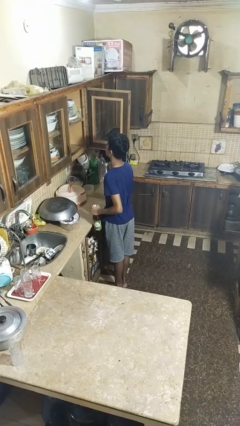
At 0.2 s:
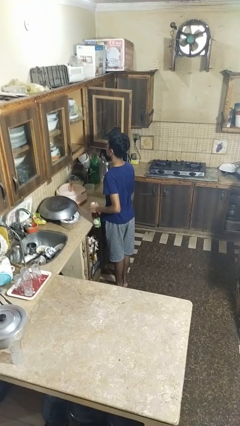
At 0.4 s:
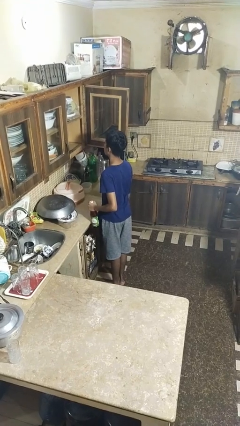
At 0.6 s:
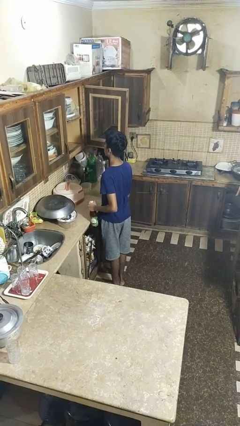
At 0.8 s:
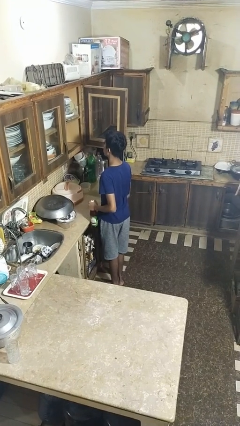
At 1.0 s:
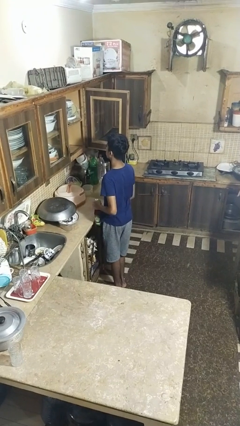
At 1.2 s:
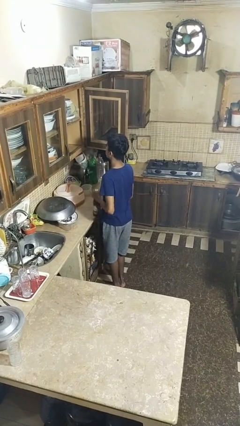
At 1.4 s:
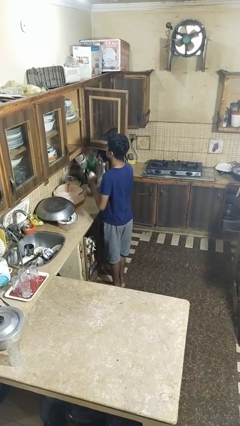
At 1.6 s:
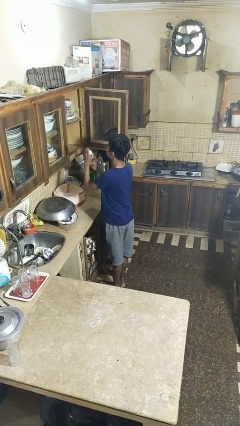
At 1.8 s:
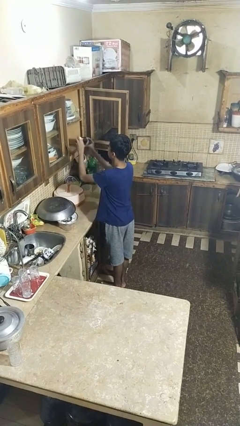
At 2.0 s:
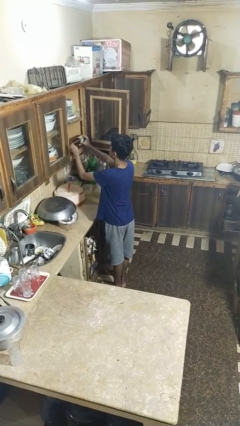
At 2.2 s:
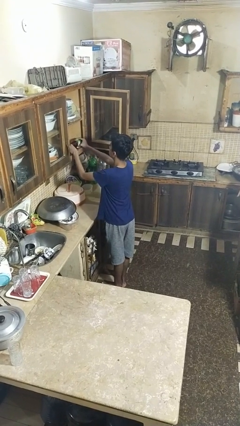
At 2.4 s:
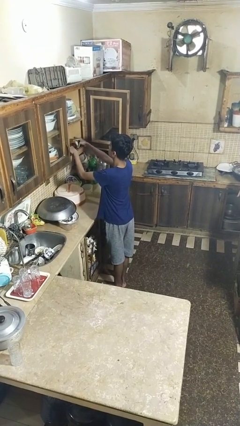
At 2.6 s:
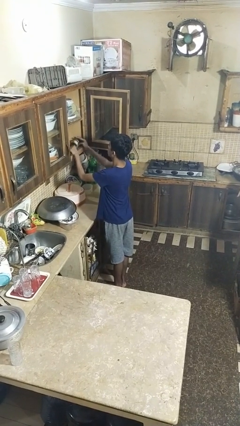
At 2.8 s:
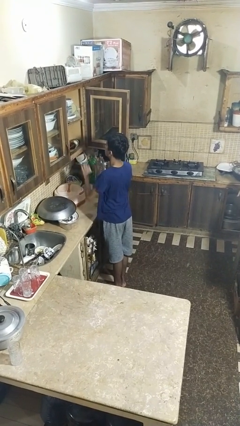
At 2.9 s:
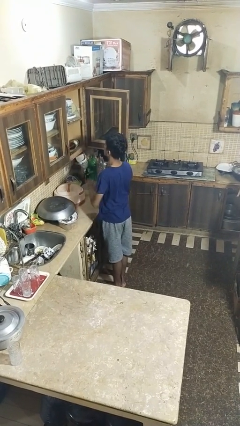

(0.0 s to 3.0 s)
person puts object in cabinet

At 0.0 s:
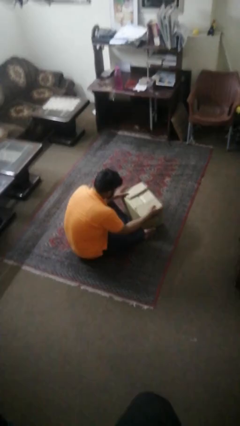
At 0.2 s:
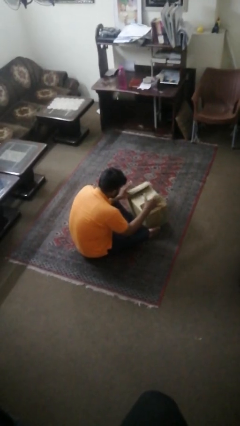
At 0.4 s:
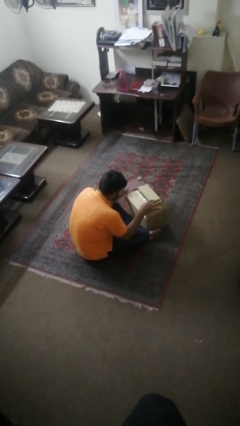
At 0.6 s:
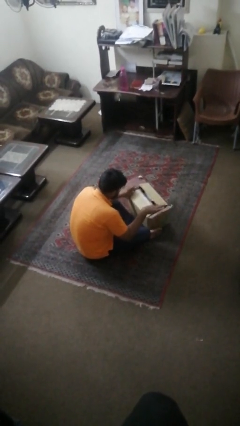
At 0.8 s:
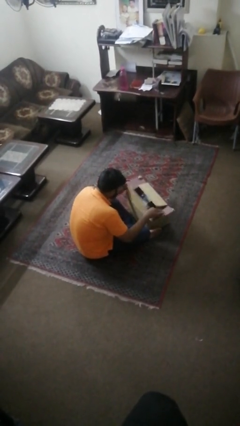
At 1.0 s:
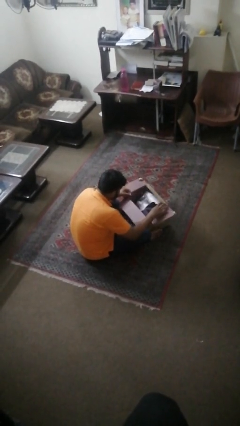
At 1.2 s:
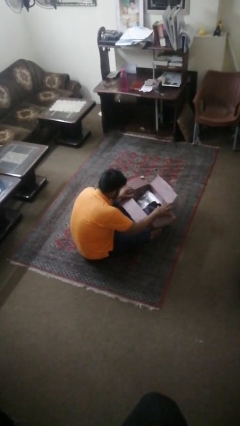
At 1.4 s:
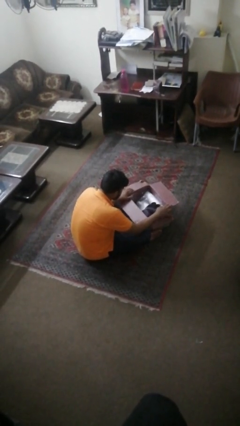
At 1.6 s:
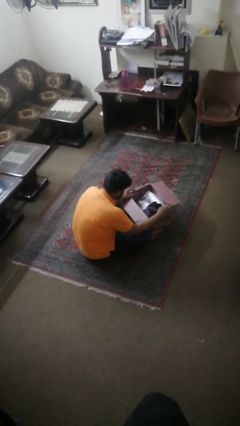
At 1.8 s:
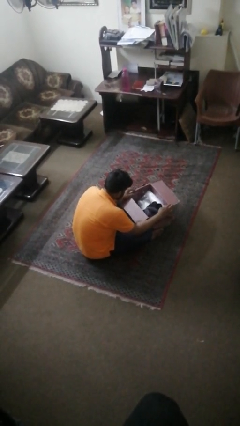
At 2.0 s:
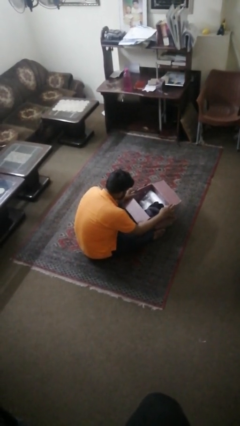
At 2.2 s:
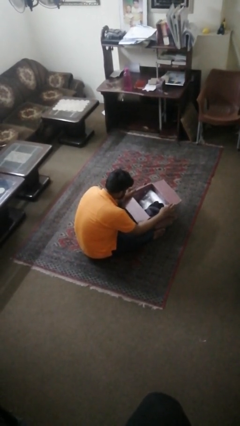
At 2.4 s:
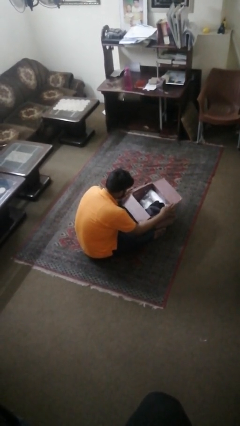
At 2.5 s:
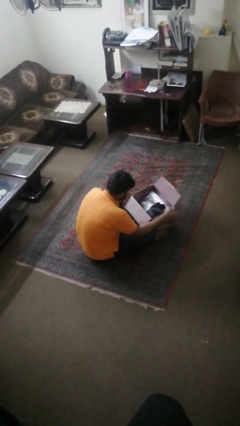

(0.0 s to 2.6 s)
person opens box

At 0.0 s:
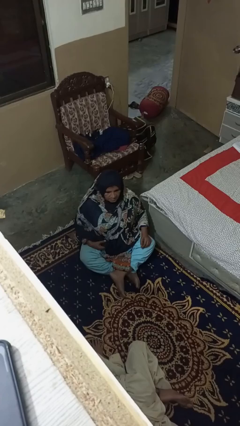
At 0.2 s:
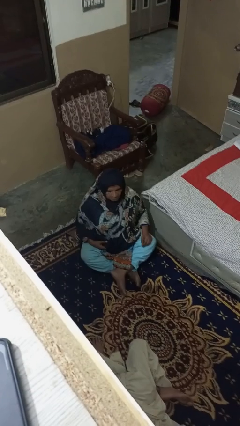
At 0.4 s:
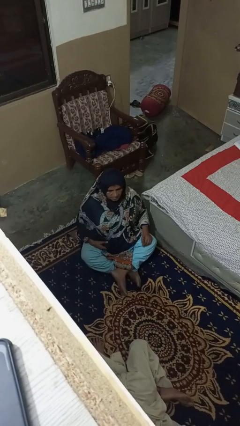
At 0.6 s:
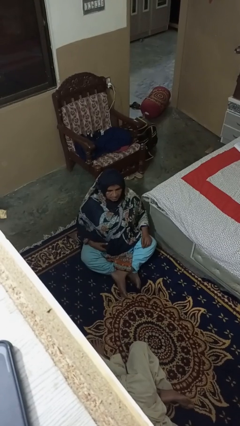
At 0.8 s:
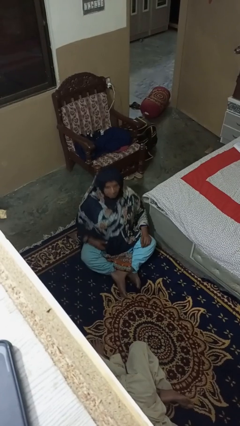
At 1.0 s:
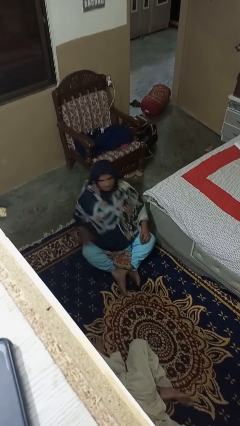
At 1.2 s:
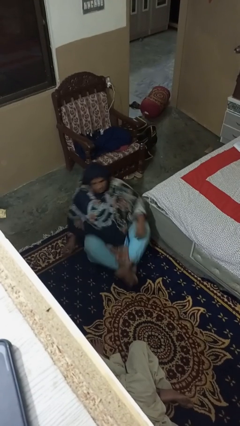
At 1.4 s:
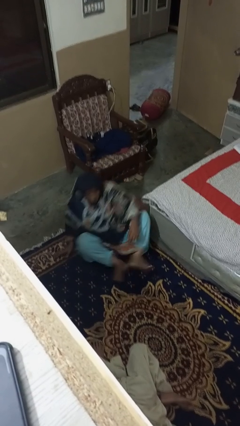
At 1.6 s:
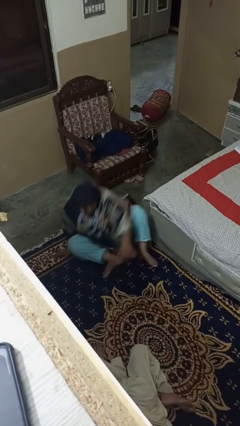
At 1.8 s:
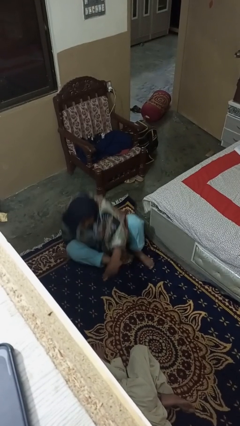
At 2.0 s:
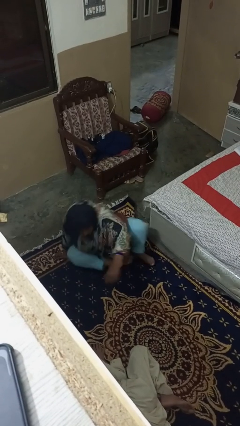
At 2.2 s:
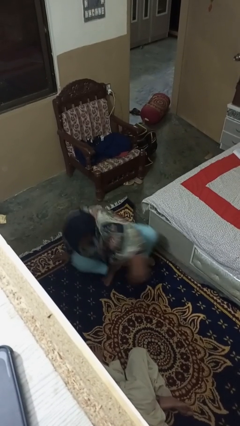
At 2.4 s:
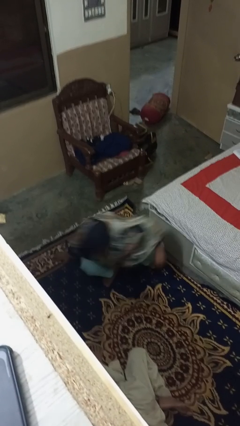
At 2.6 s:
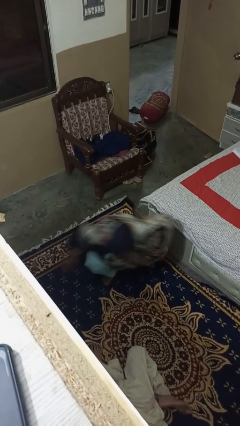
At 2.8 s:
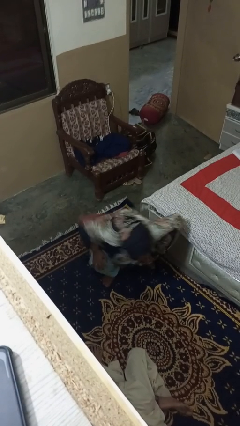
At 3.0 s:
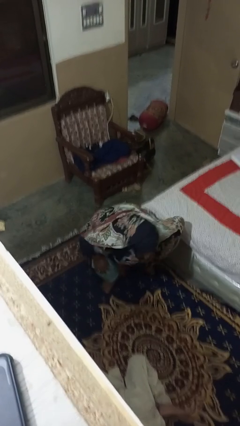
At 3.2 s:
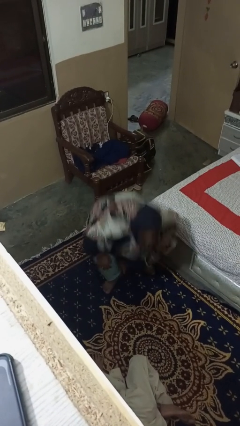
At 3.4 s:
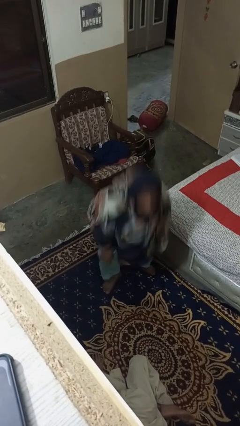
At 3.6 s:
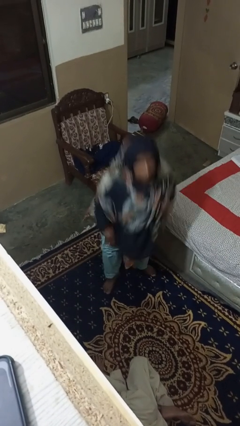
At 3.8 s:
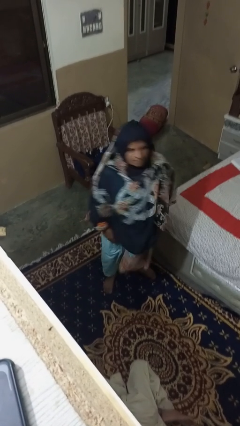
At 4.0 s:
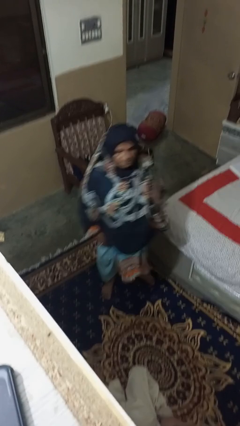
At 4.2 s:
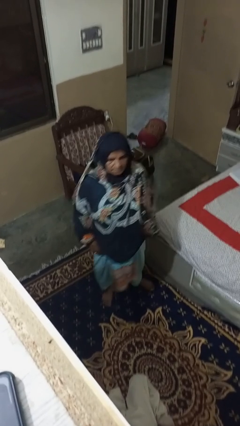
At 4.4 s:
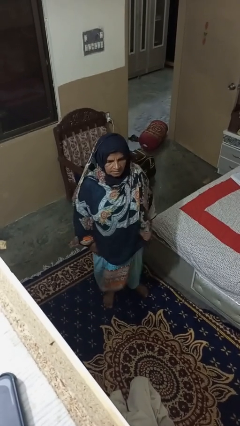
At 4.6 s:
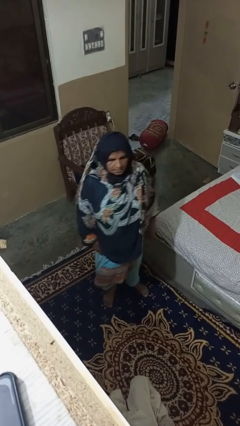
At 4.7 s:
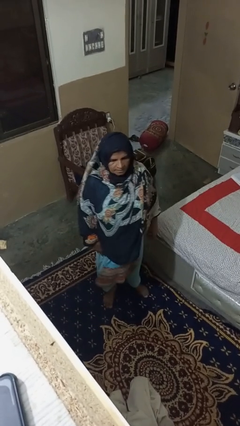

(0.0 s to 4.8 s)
person stands up from floor

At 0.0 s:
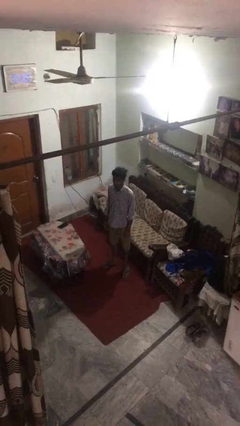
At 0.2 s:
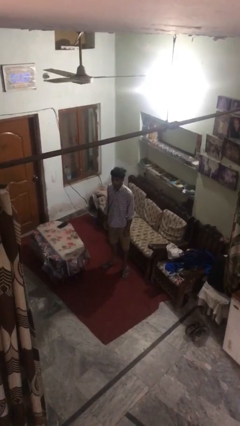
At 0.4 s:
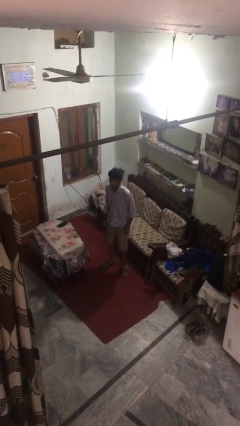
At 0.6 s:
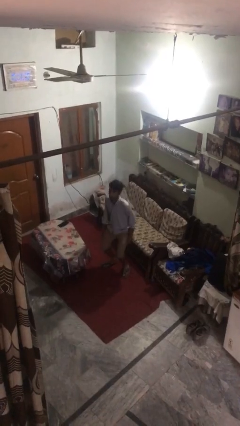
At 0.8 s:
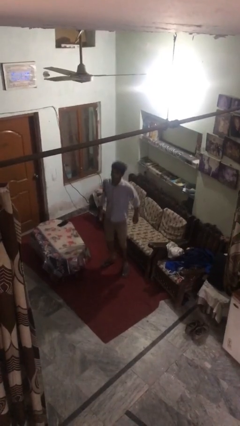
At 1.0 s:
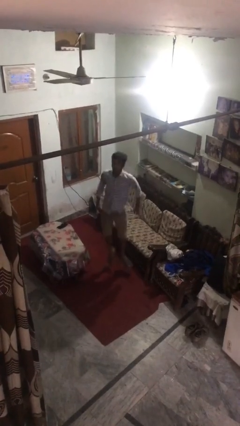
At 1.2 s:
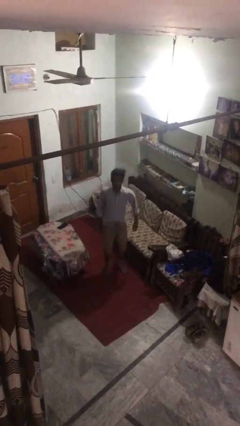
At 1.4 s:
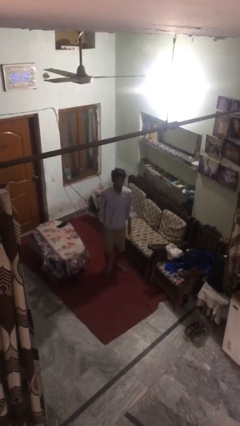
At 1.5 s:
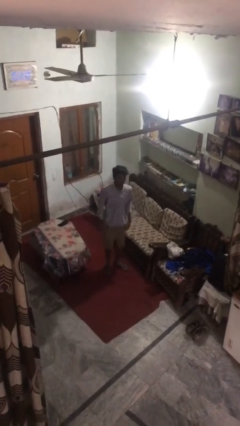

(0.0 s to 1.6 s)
person jumps

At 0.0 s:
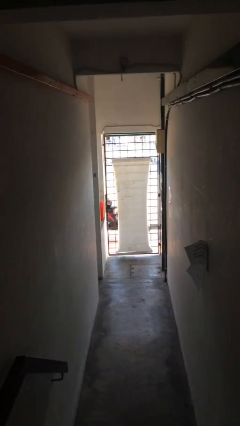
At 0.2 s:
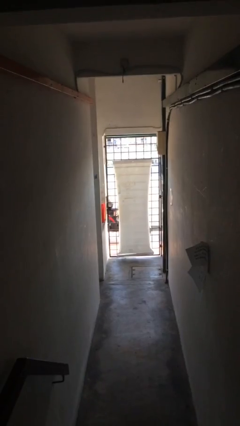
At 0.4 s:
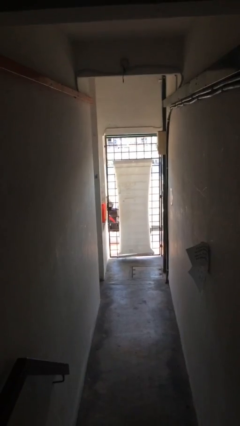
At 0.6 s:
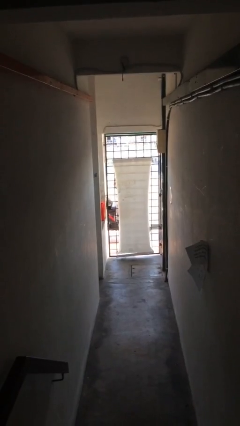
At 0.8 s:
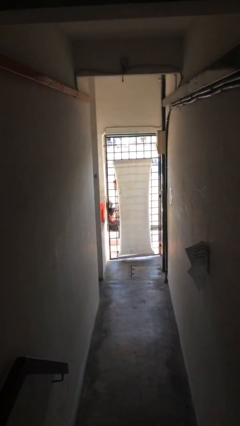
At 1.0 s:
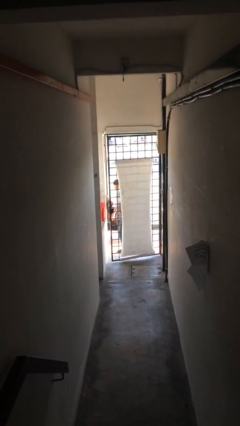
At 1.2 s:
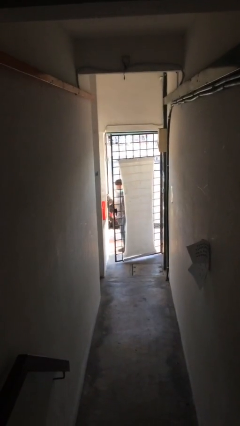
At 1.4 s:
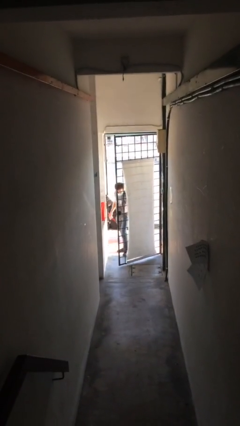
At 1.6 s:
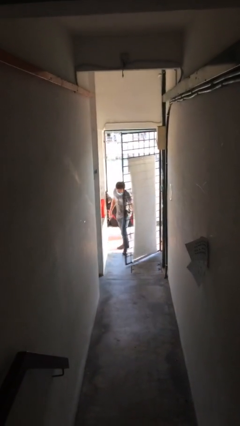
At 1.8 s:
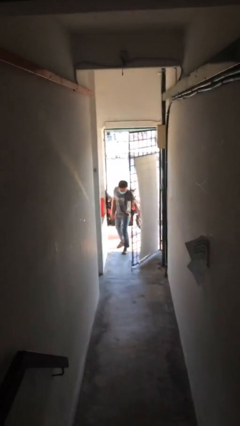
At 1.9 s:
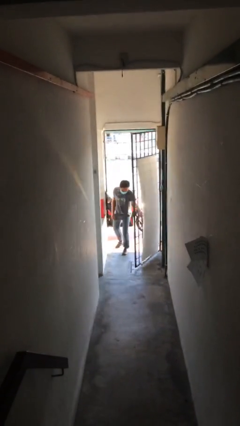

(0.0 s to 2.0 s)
person opens facility door

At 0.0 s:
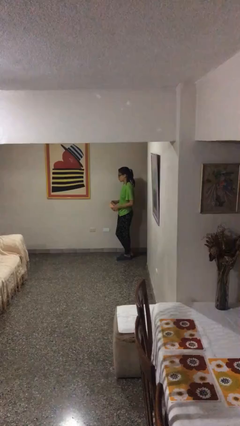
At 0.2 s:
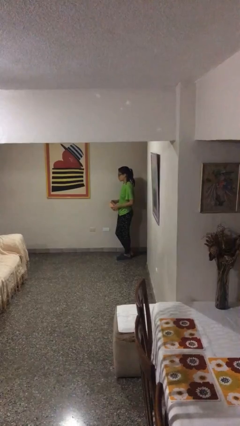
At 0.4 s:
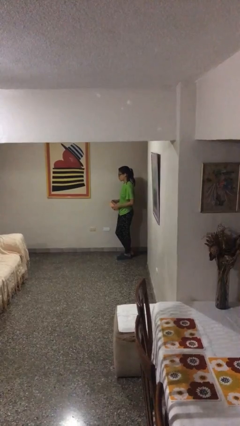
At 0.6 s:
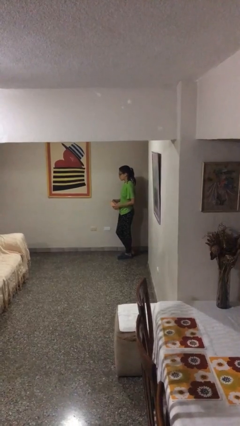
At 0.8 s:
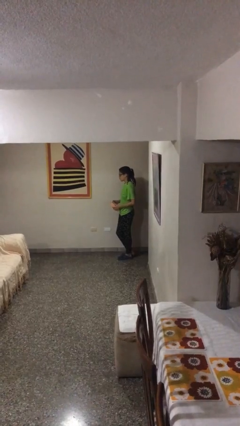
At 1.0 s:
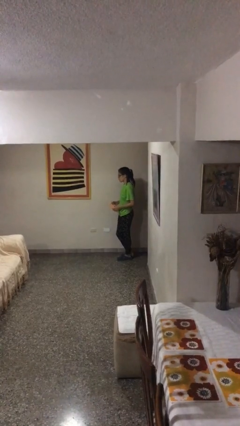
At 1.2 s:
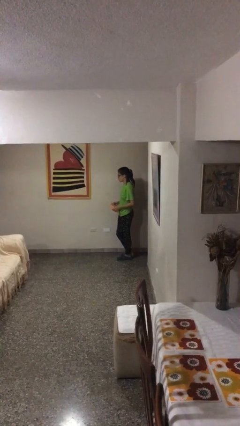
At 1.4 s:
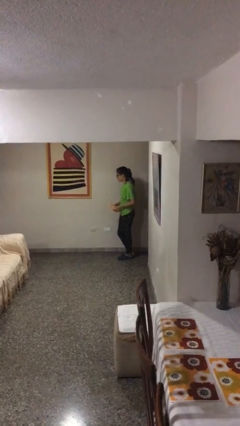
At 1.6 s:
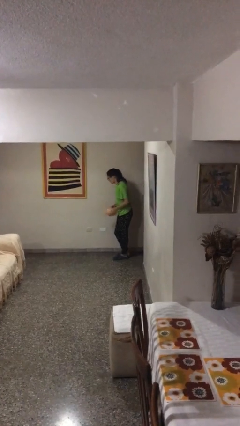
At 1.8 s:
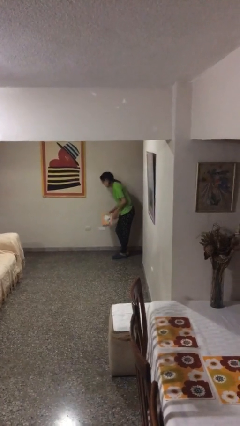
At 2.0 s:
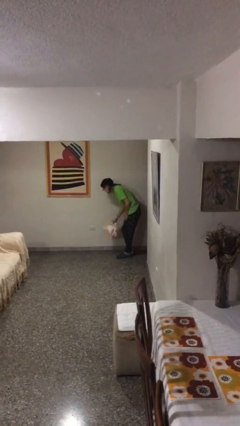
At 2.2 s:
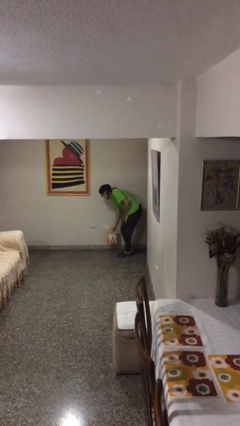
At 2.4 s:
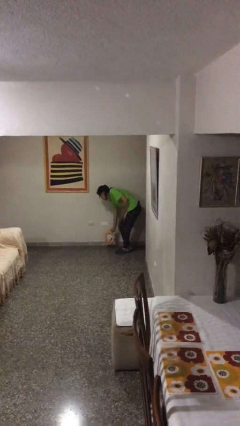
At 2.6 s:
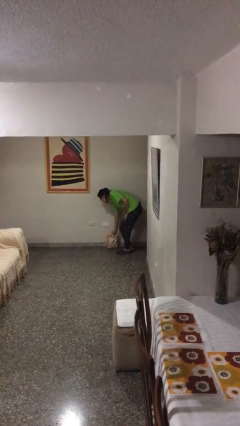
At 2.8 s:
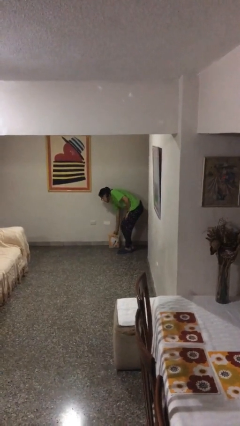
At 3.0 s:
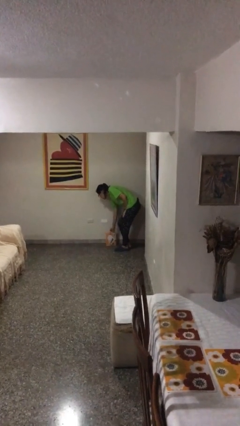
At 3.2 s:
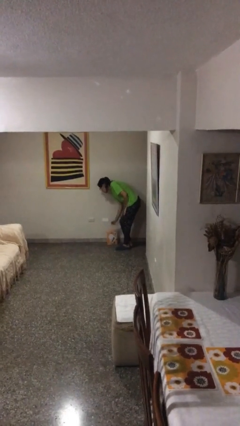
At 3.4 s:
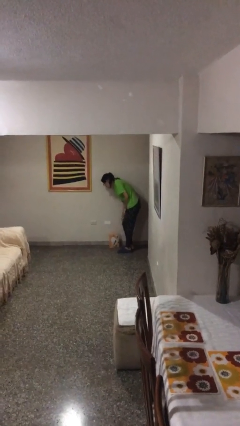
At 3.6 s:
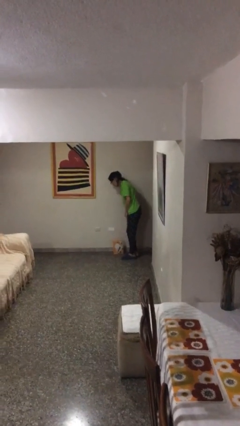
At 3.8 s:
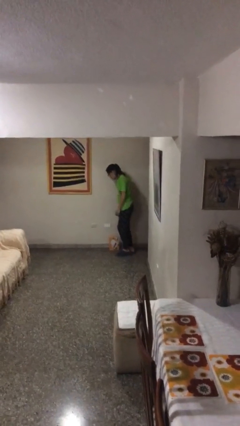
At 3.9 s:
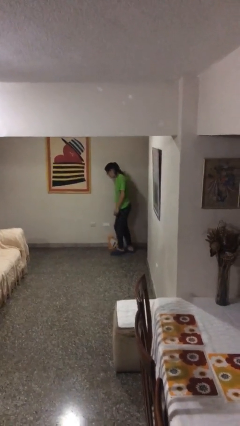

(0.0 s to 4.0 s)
person puts down object on floor
